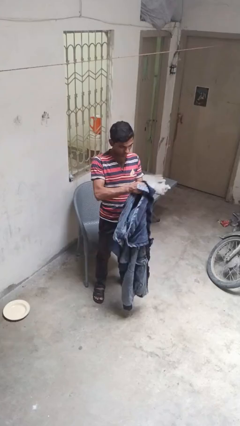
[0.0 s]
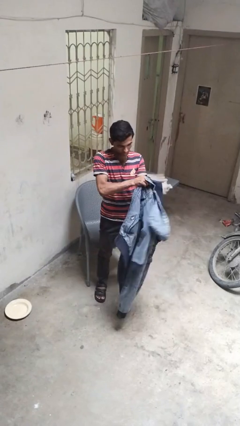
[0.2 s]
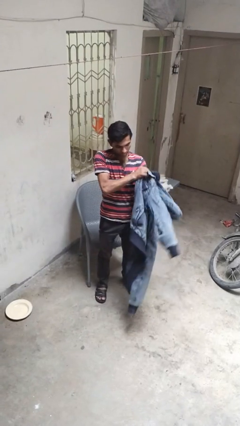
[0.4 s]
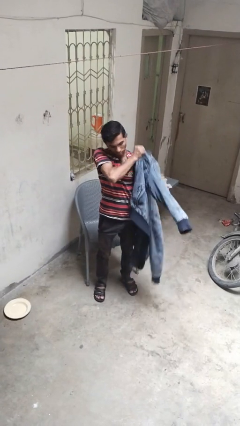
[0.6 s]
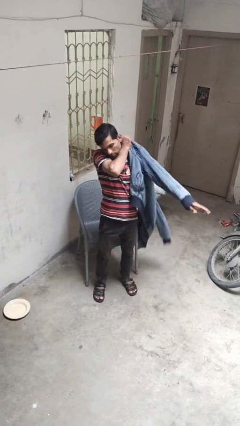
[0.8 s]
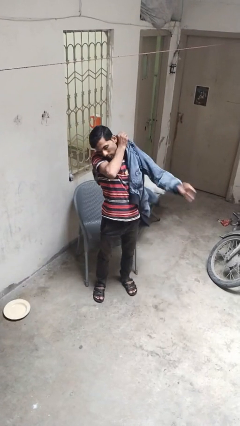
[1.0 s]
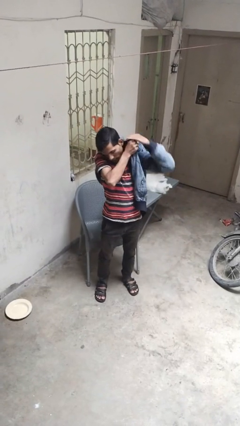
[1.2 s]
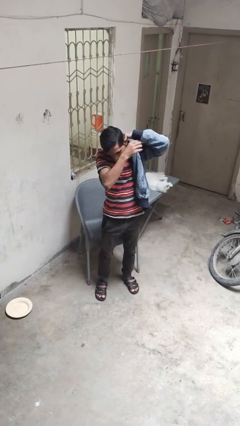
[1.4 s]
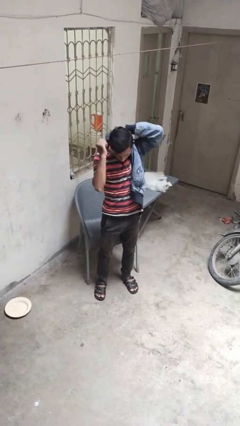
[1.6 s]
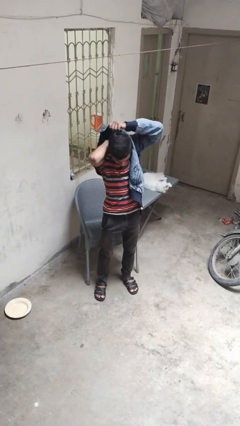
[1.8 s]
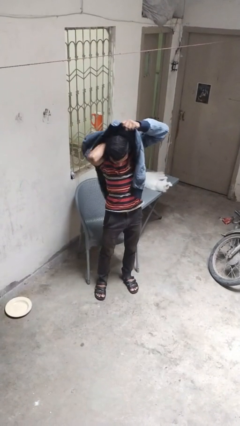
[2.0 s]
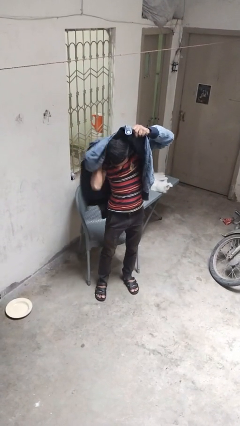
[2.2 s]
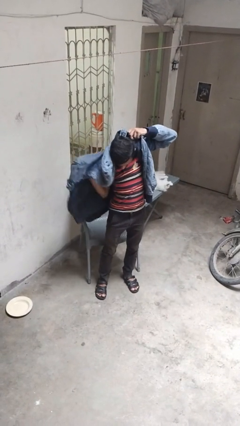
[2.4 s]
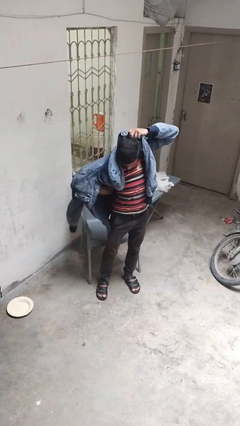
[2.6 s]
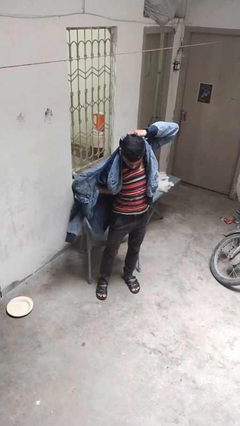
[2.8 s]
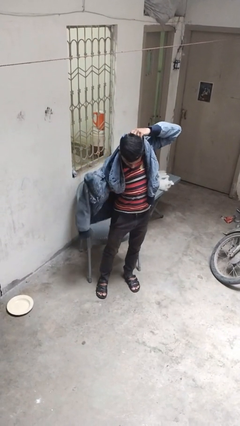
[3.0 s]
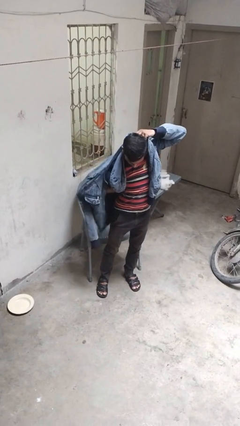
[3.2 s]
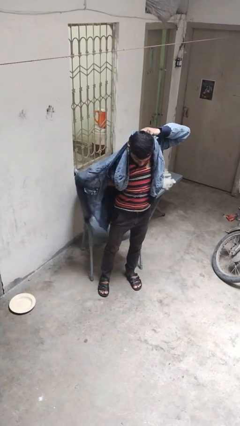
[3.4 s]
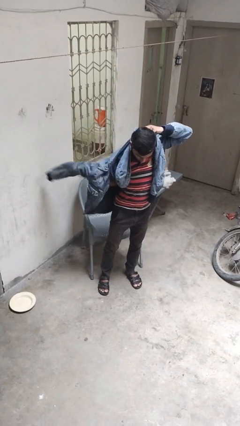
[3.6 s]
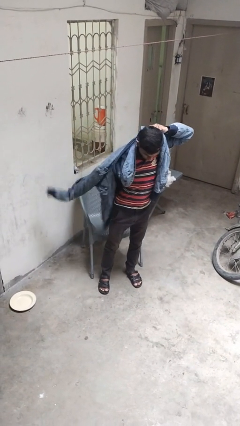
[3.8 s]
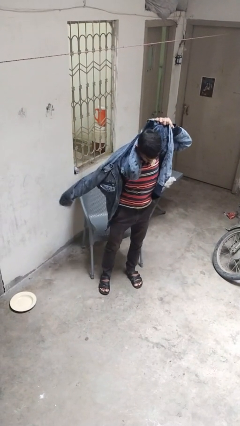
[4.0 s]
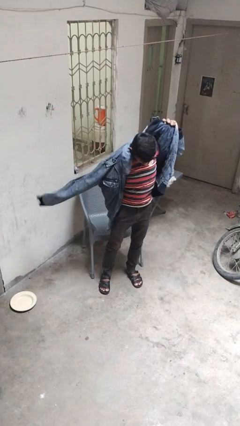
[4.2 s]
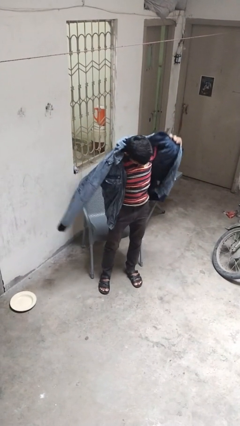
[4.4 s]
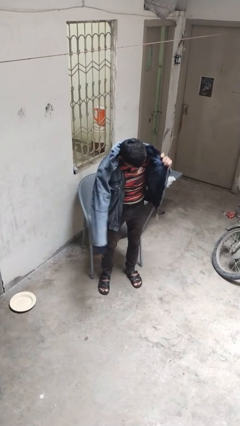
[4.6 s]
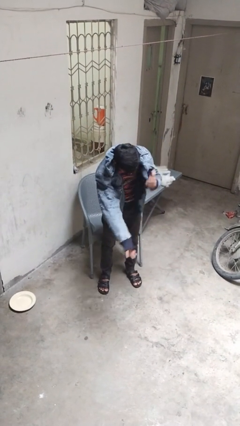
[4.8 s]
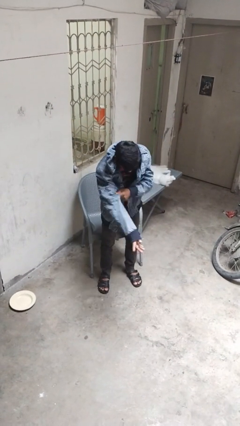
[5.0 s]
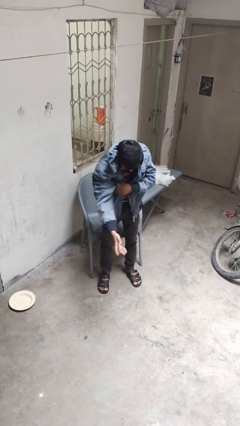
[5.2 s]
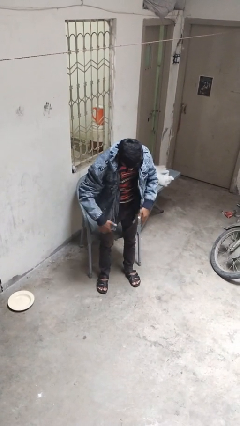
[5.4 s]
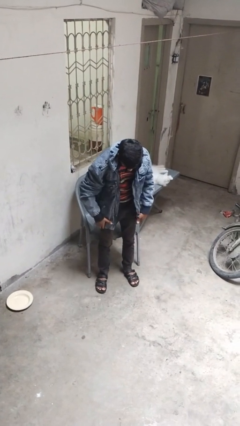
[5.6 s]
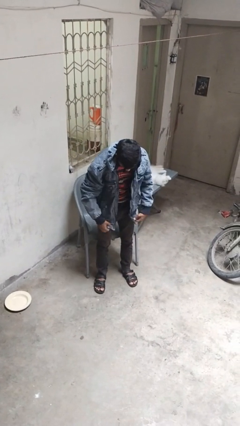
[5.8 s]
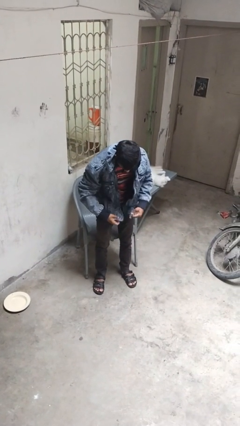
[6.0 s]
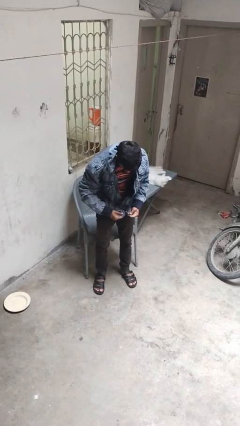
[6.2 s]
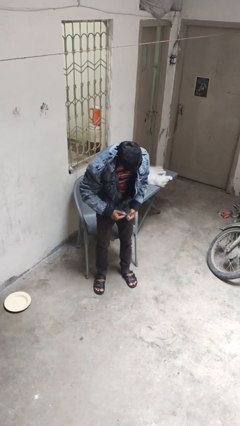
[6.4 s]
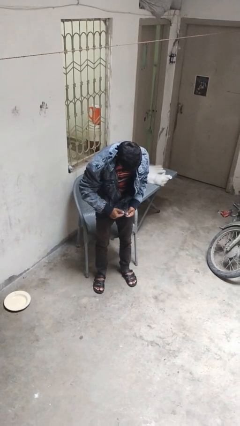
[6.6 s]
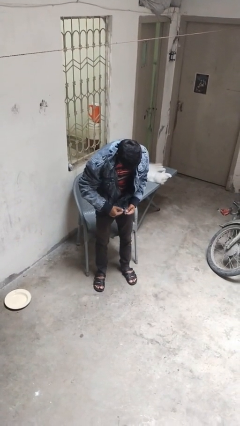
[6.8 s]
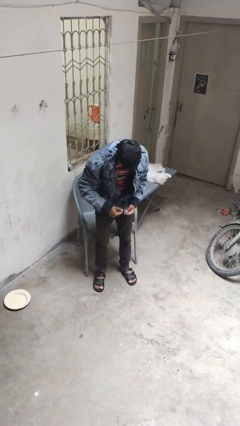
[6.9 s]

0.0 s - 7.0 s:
person puts on jacket

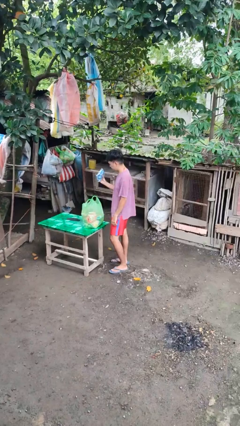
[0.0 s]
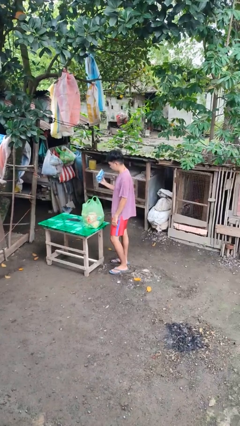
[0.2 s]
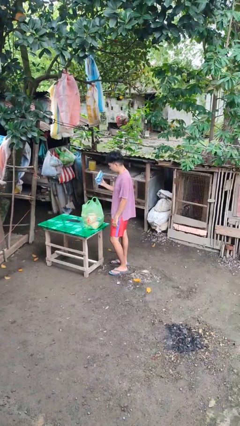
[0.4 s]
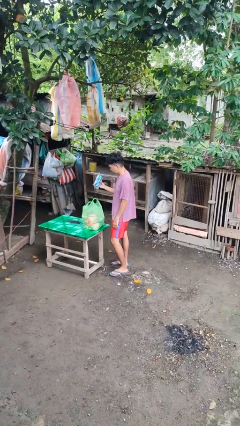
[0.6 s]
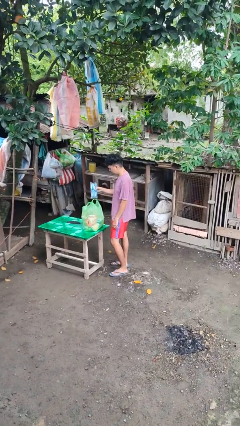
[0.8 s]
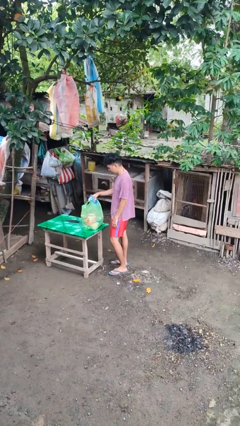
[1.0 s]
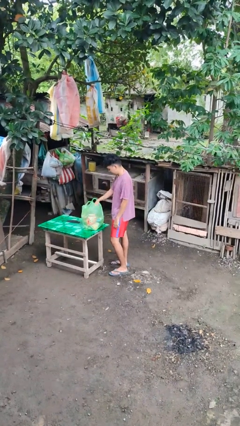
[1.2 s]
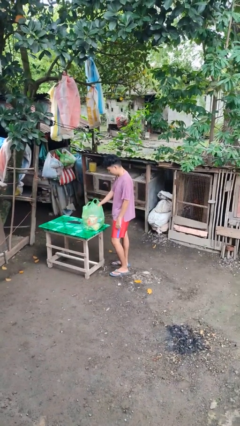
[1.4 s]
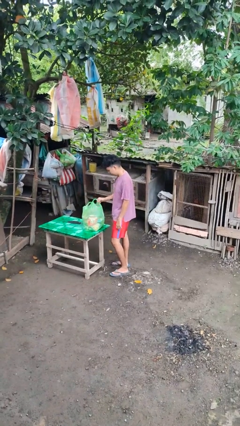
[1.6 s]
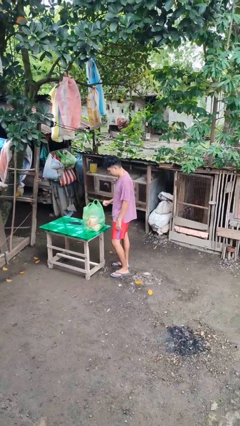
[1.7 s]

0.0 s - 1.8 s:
person puts object into bag

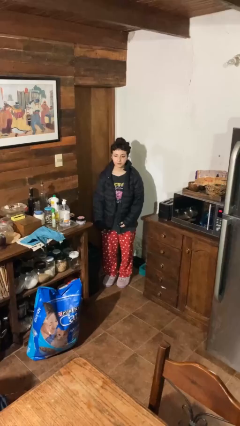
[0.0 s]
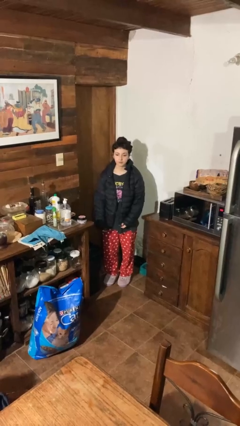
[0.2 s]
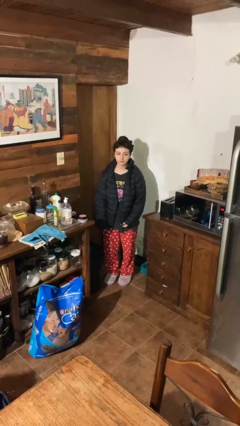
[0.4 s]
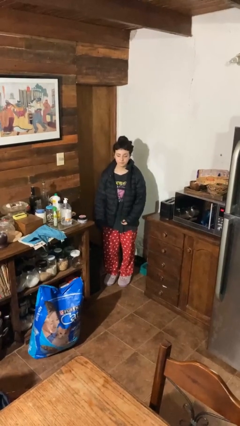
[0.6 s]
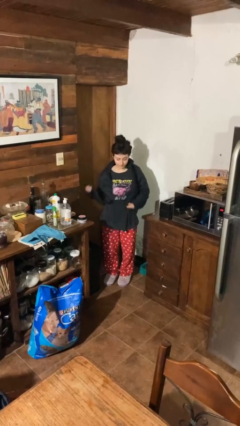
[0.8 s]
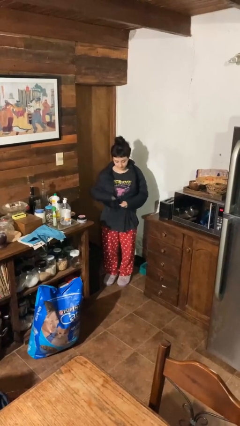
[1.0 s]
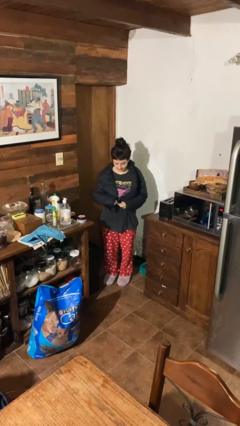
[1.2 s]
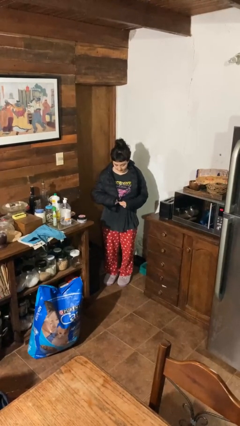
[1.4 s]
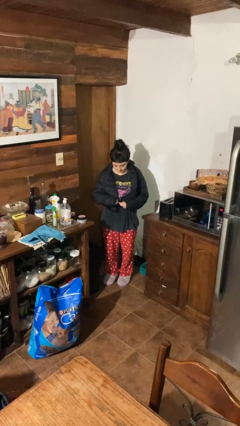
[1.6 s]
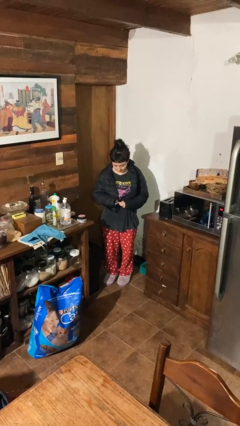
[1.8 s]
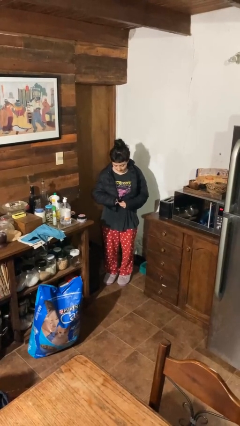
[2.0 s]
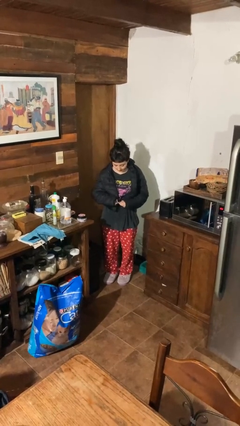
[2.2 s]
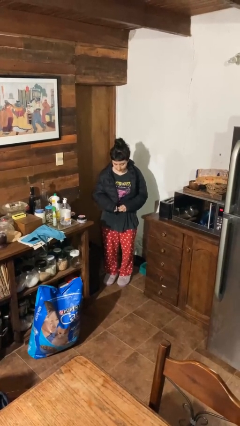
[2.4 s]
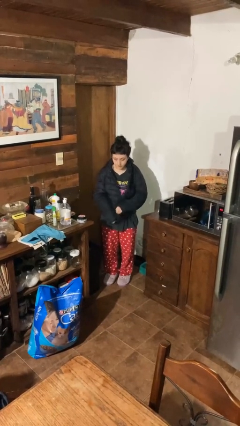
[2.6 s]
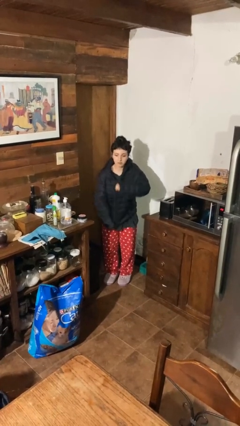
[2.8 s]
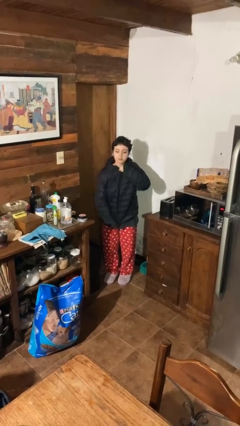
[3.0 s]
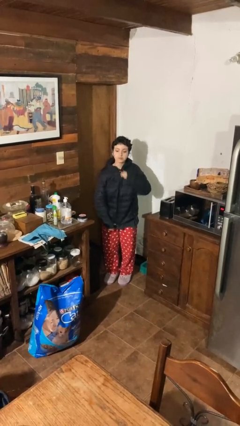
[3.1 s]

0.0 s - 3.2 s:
person zips up jacket

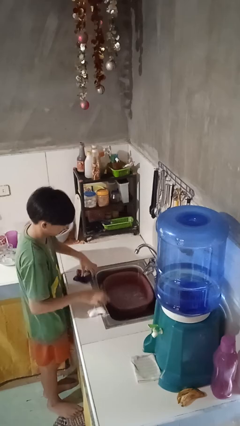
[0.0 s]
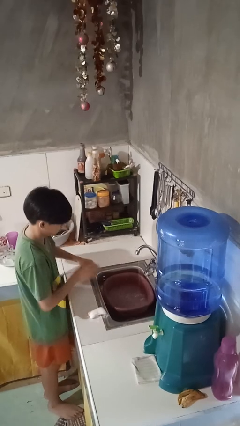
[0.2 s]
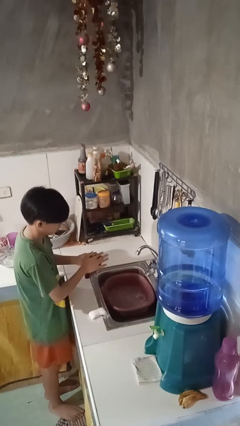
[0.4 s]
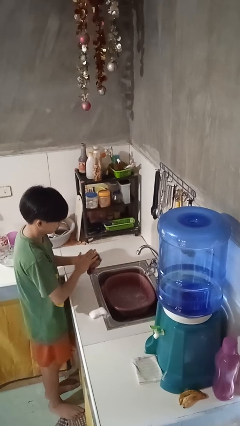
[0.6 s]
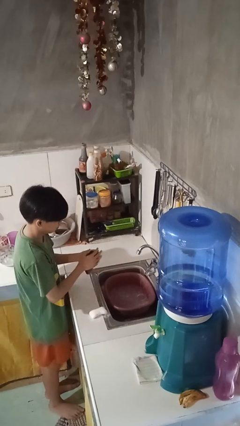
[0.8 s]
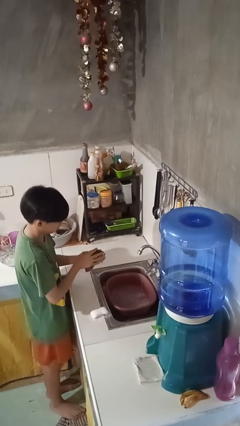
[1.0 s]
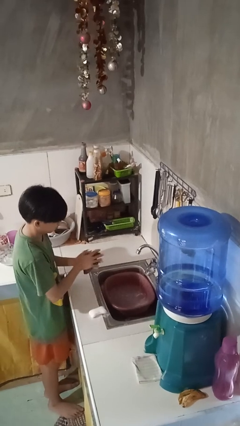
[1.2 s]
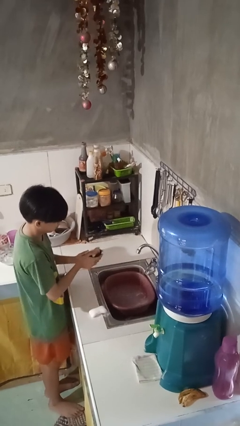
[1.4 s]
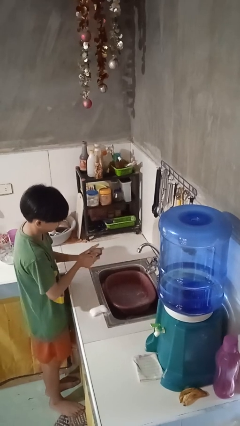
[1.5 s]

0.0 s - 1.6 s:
person dries hands with towel

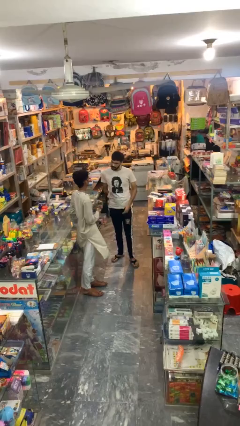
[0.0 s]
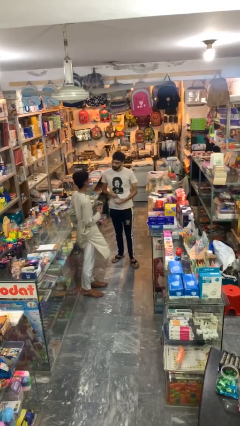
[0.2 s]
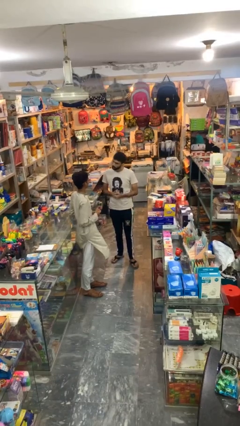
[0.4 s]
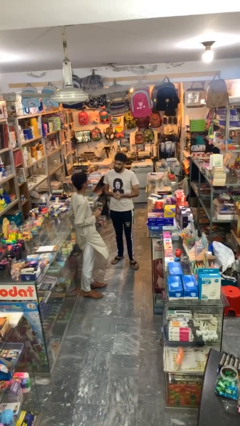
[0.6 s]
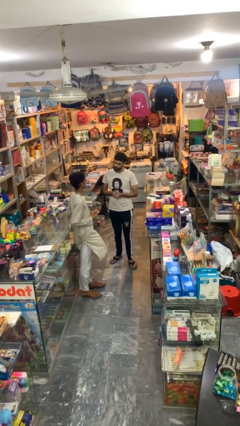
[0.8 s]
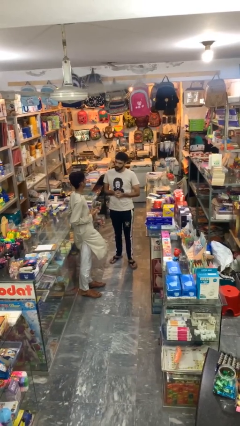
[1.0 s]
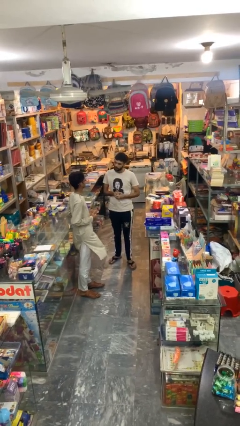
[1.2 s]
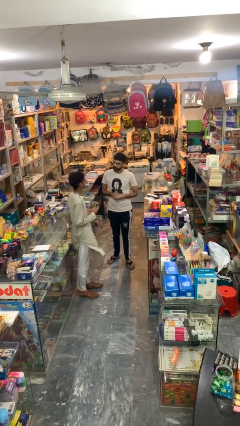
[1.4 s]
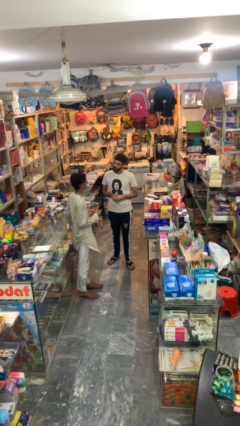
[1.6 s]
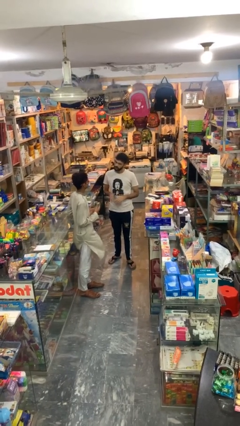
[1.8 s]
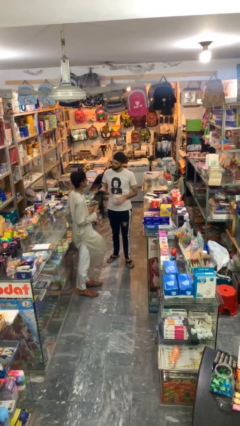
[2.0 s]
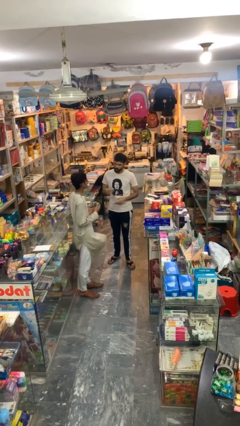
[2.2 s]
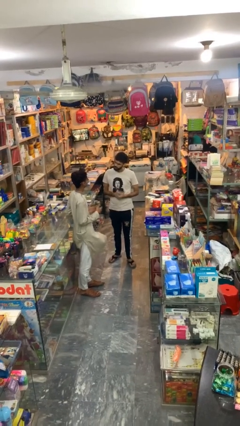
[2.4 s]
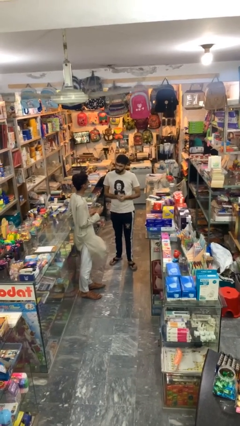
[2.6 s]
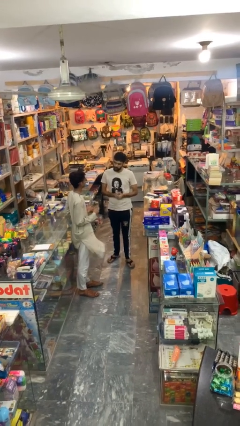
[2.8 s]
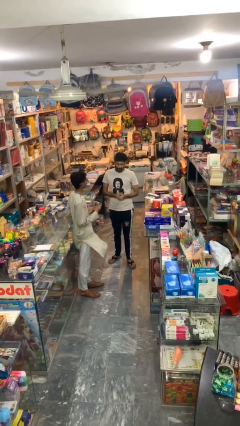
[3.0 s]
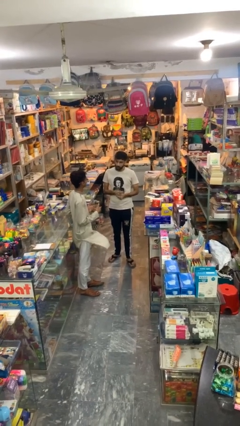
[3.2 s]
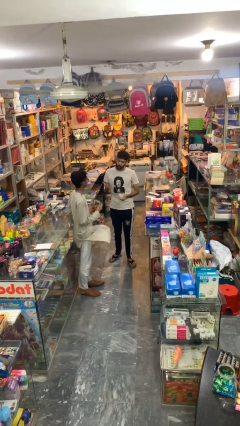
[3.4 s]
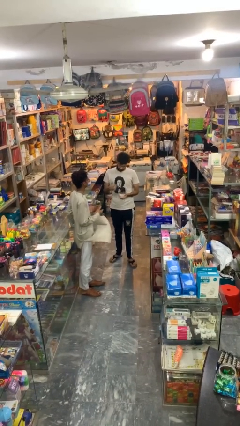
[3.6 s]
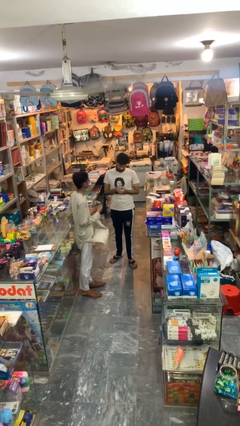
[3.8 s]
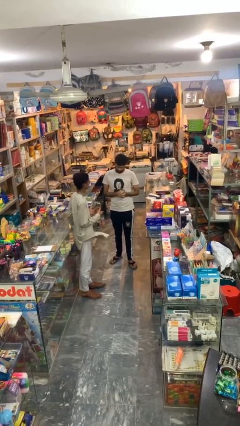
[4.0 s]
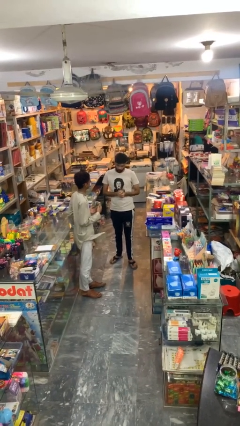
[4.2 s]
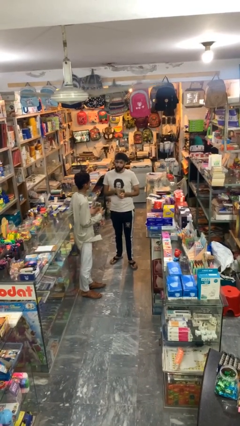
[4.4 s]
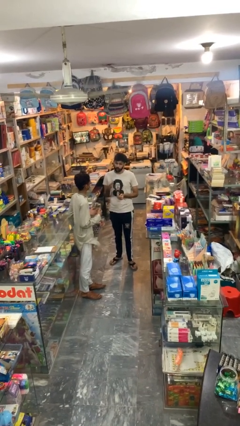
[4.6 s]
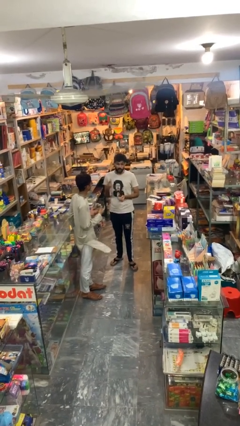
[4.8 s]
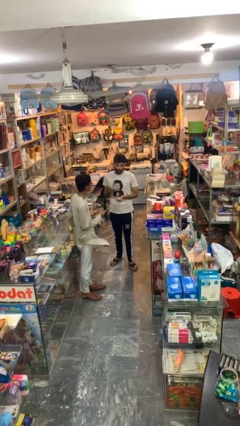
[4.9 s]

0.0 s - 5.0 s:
person talks to person
